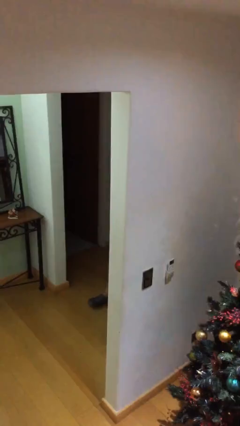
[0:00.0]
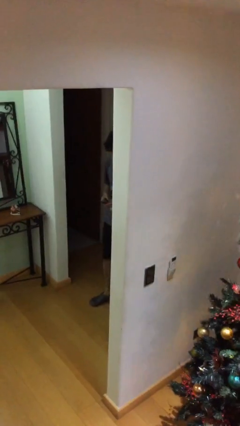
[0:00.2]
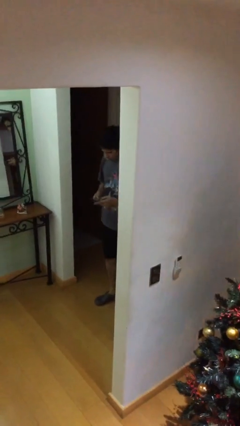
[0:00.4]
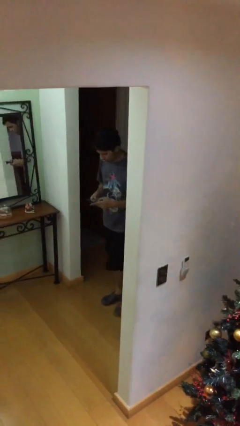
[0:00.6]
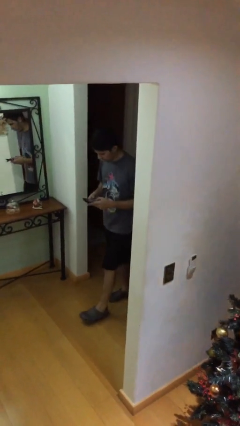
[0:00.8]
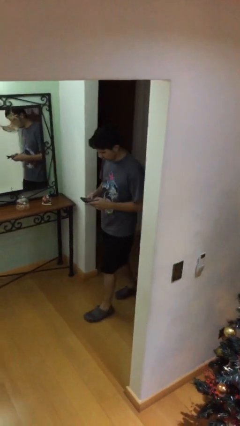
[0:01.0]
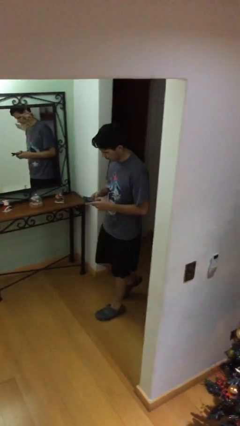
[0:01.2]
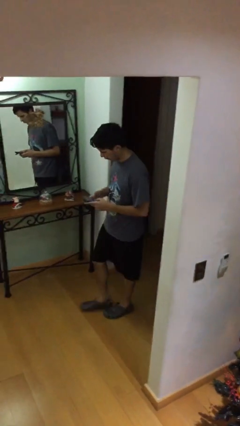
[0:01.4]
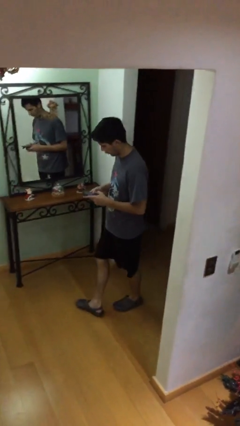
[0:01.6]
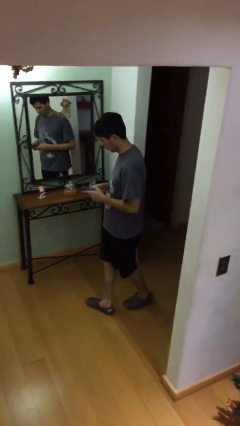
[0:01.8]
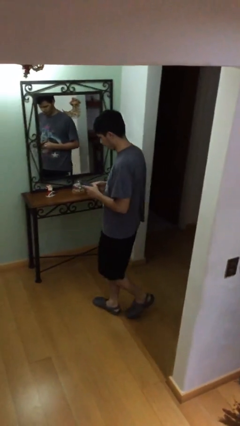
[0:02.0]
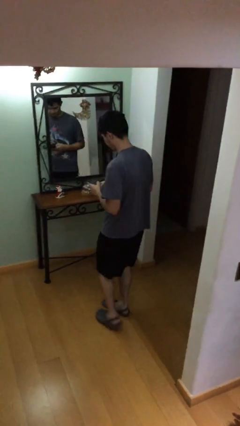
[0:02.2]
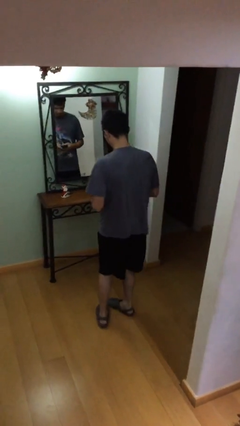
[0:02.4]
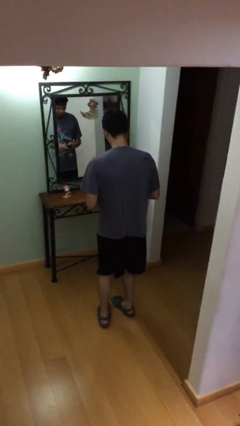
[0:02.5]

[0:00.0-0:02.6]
person enters scene through structure

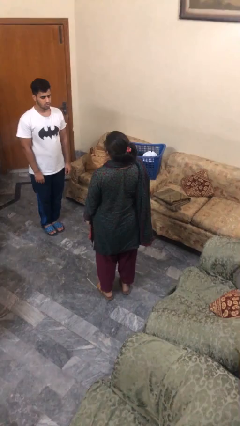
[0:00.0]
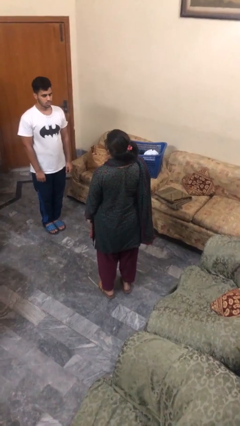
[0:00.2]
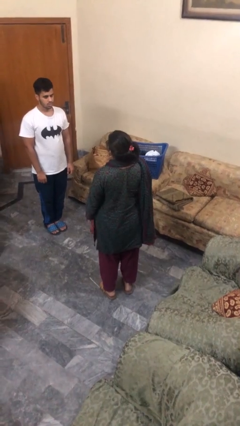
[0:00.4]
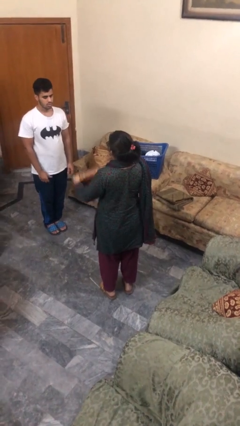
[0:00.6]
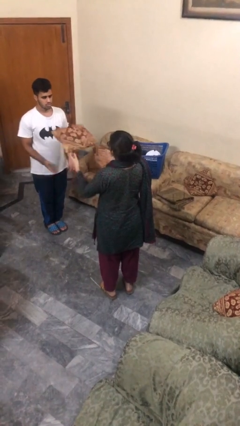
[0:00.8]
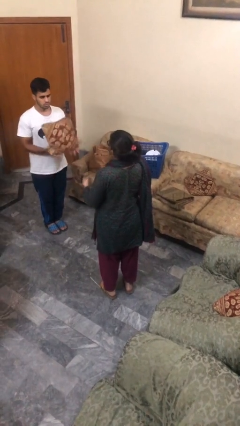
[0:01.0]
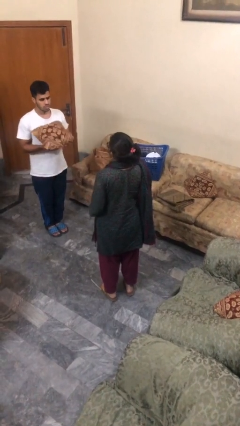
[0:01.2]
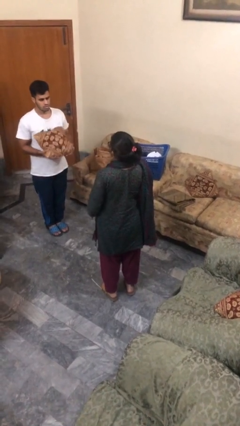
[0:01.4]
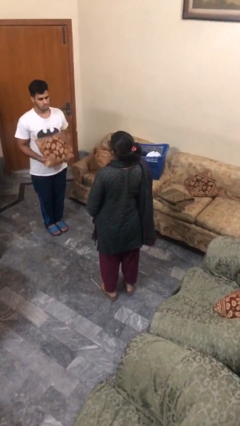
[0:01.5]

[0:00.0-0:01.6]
person throws object to person

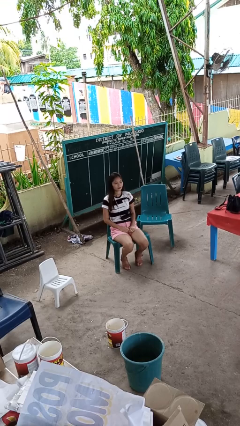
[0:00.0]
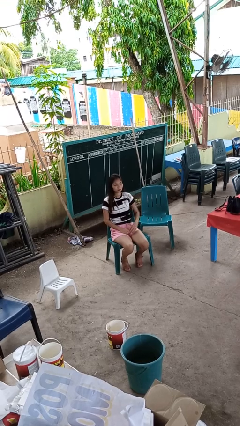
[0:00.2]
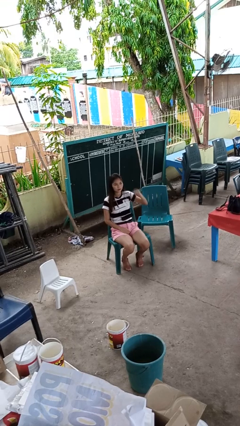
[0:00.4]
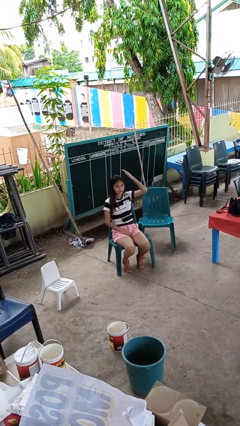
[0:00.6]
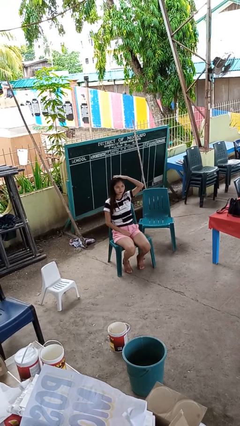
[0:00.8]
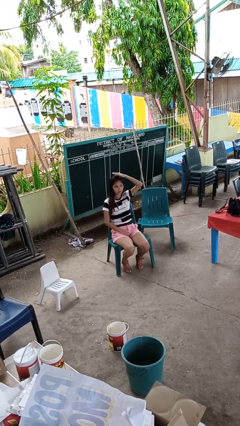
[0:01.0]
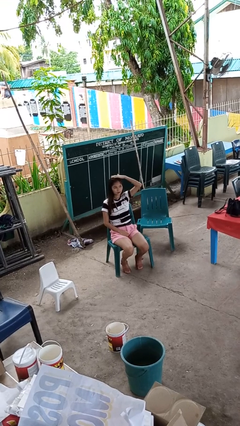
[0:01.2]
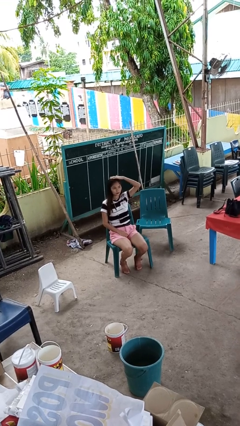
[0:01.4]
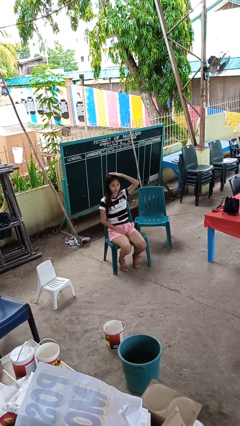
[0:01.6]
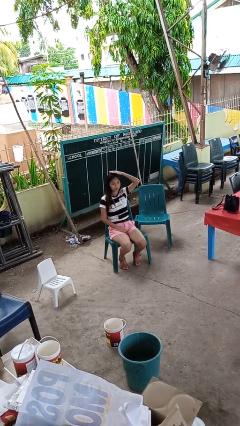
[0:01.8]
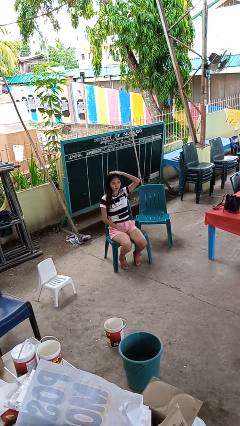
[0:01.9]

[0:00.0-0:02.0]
person pats head

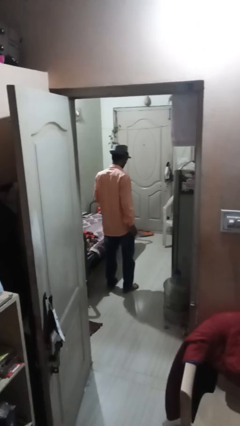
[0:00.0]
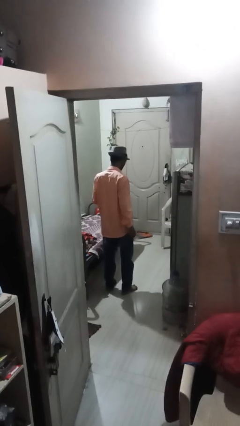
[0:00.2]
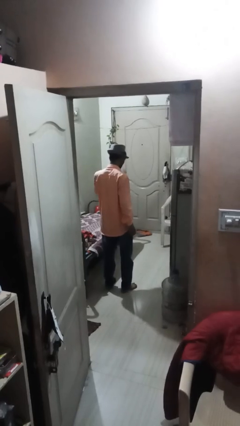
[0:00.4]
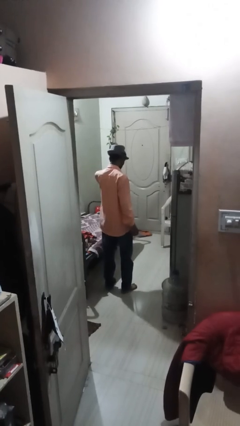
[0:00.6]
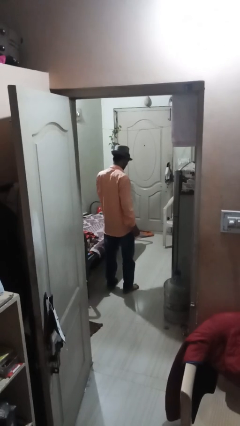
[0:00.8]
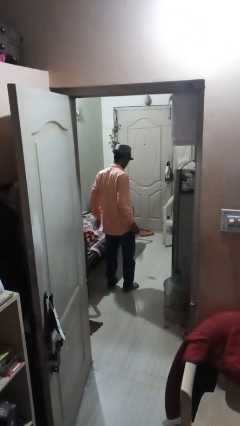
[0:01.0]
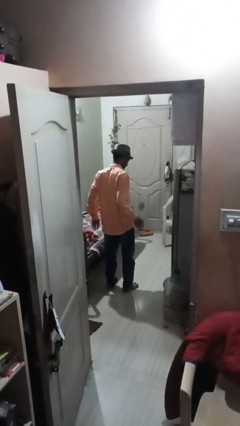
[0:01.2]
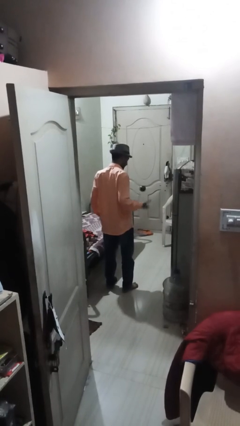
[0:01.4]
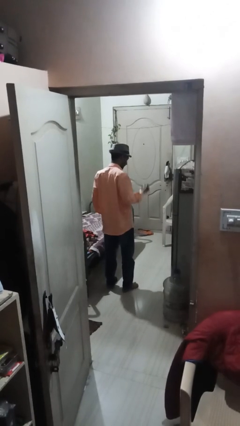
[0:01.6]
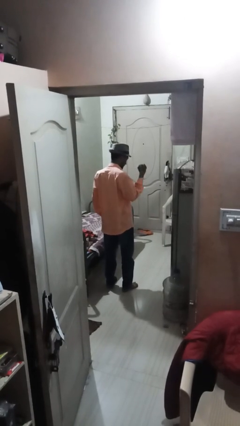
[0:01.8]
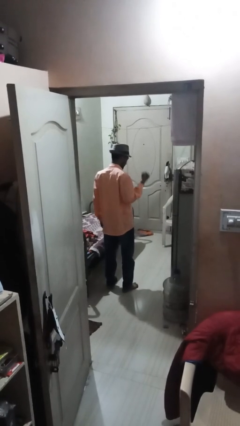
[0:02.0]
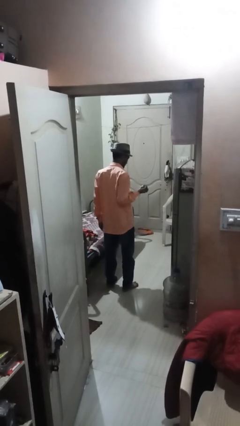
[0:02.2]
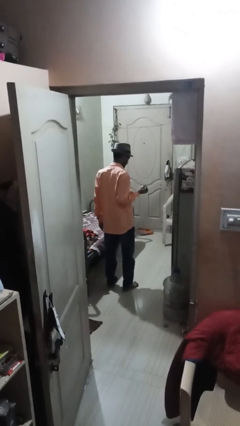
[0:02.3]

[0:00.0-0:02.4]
person bounces ball on floor

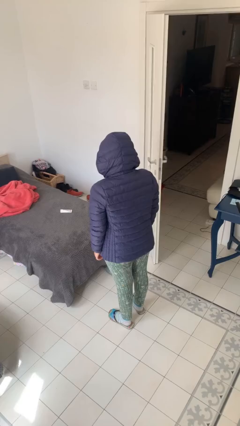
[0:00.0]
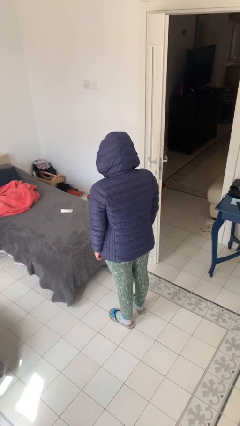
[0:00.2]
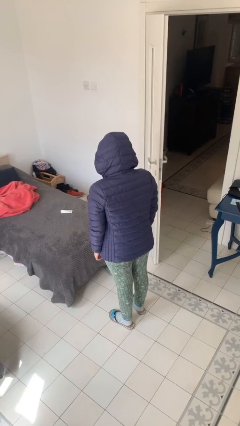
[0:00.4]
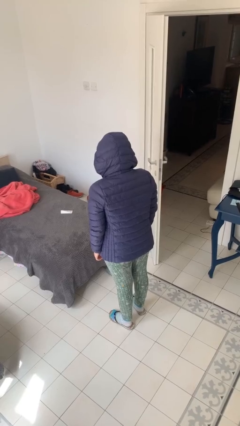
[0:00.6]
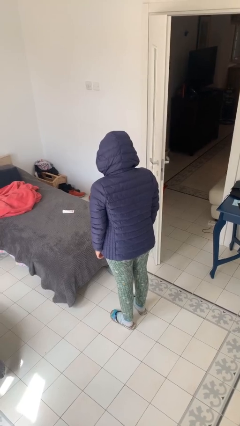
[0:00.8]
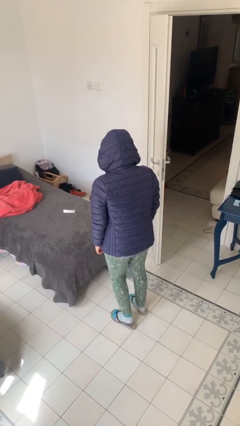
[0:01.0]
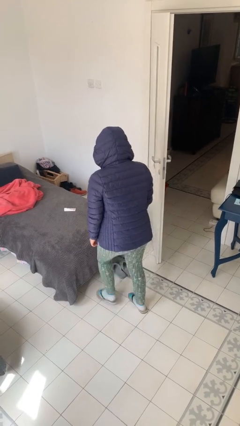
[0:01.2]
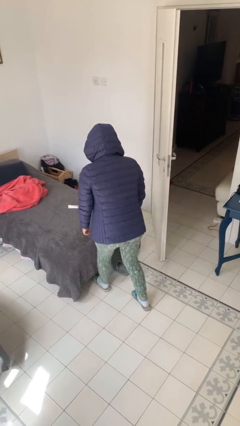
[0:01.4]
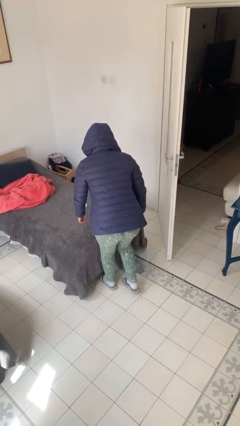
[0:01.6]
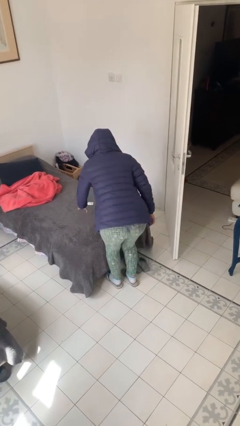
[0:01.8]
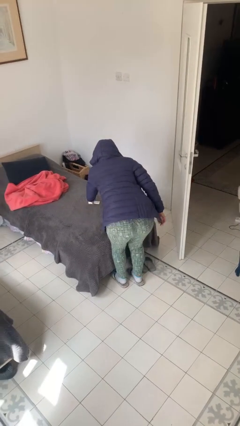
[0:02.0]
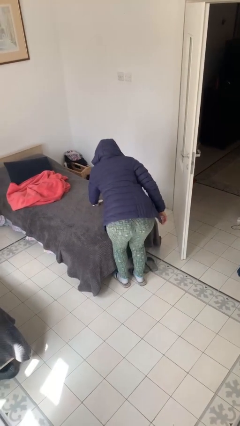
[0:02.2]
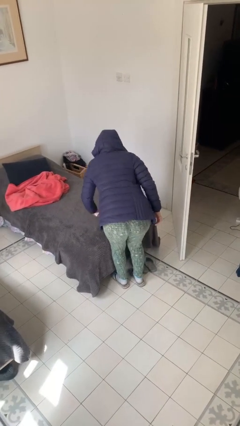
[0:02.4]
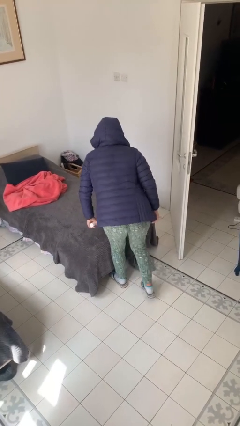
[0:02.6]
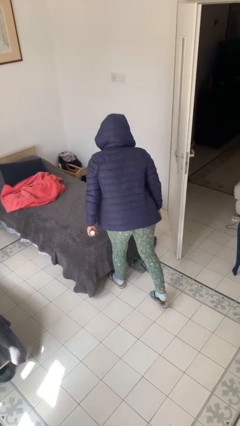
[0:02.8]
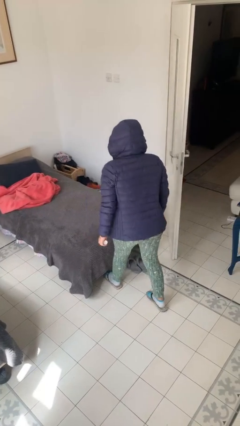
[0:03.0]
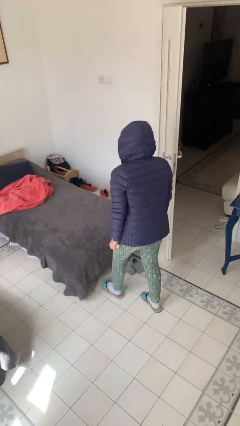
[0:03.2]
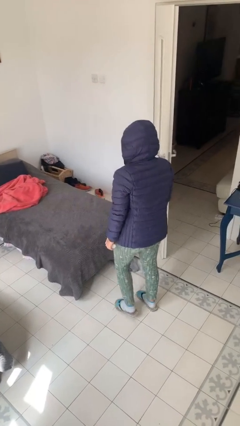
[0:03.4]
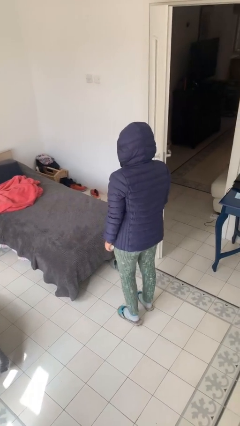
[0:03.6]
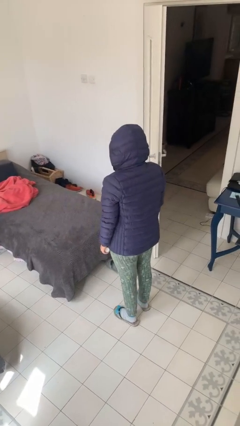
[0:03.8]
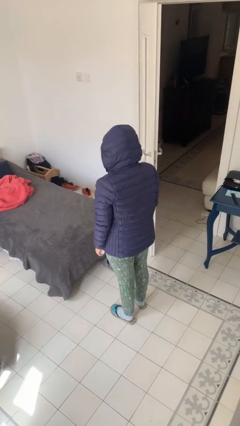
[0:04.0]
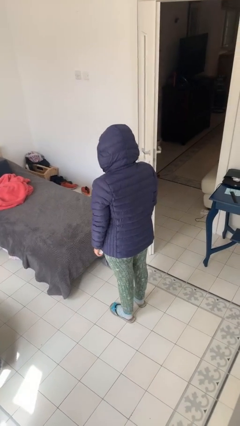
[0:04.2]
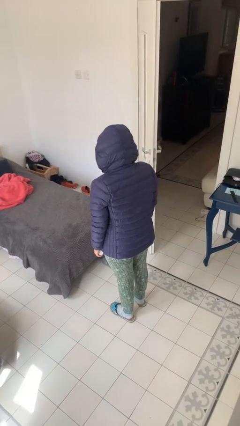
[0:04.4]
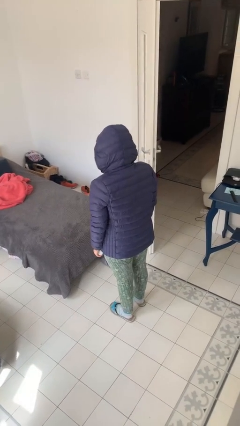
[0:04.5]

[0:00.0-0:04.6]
person picks up object from bed

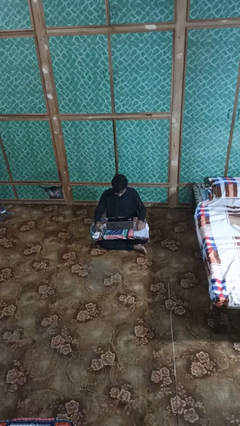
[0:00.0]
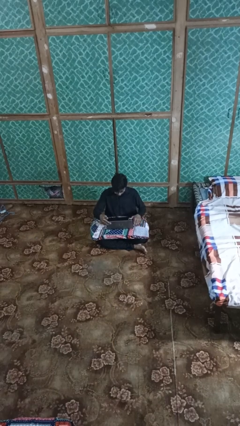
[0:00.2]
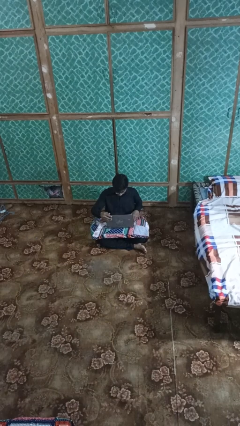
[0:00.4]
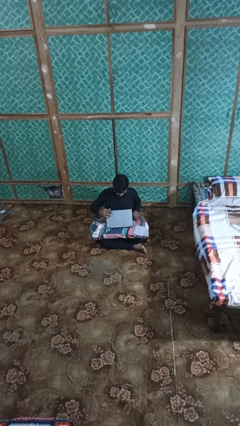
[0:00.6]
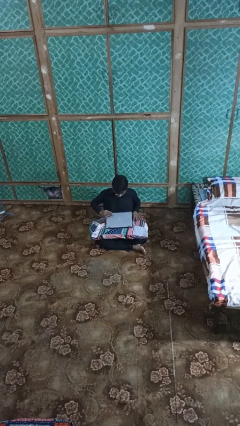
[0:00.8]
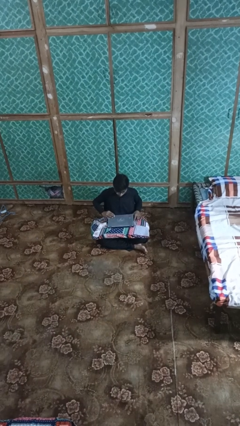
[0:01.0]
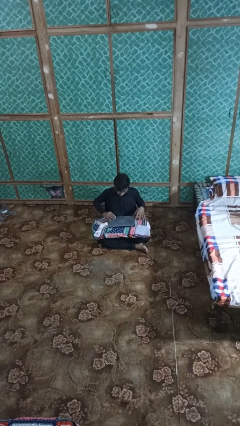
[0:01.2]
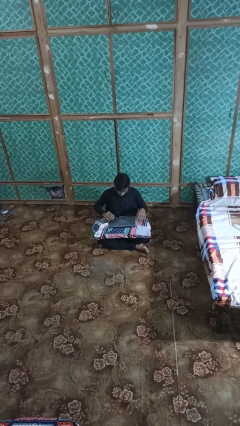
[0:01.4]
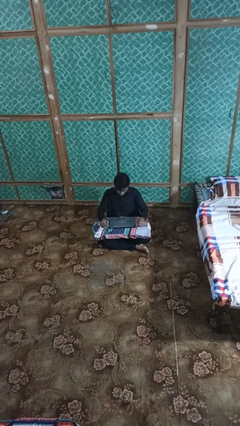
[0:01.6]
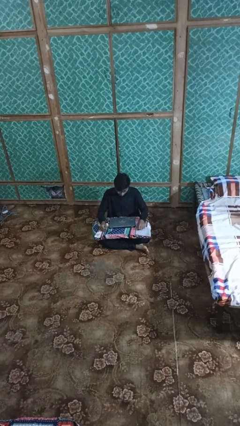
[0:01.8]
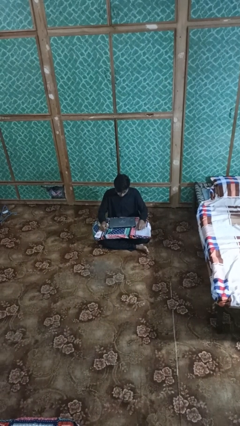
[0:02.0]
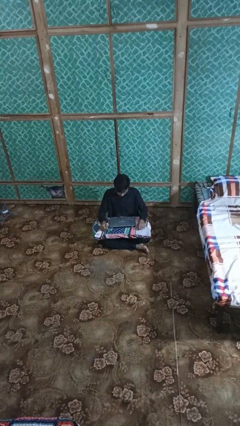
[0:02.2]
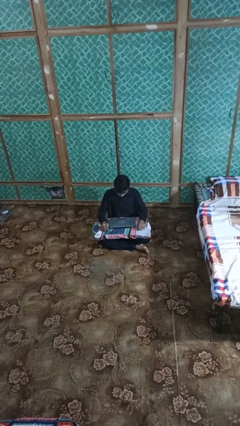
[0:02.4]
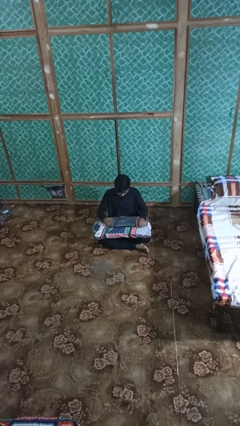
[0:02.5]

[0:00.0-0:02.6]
person closes laptop

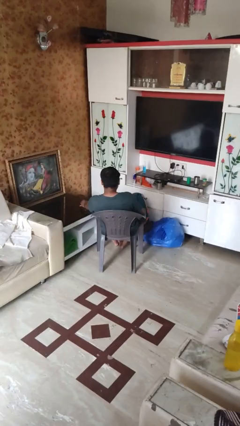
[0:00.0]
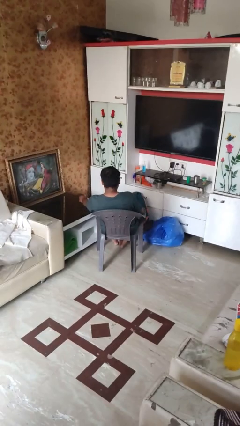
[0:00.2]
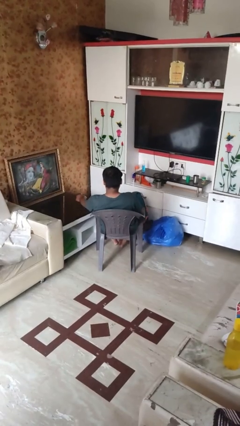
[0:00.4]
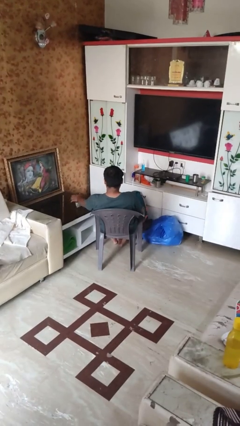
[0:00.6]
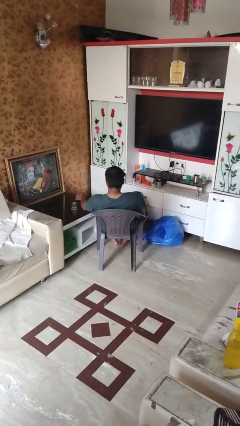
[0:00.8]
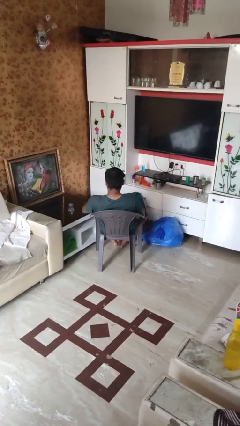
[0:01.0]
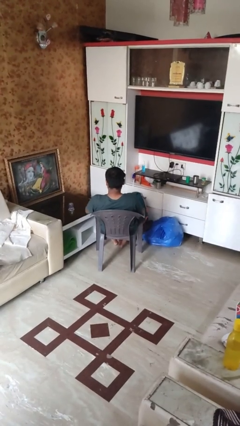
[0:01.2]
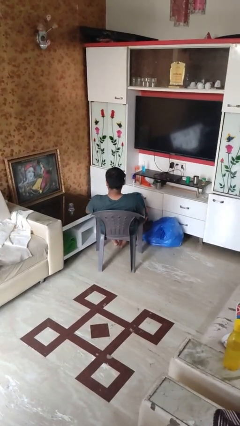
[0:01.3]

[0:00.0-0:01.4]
person knocks over glass
